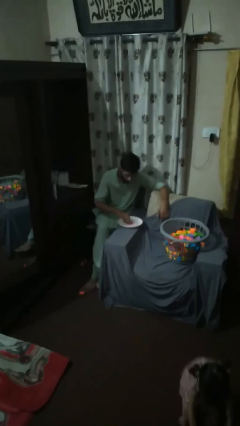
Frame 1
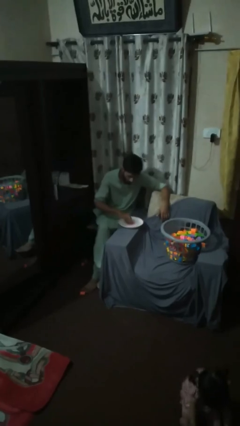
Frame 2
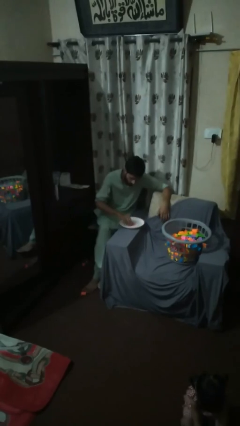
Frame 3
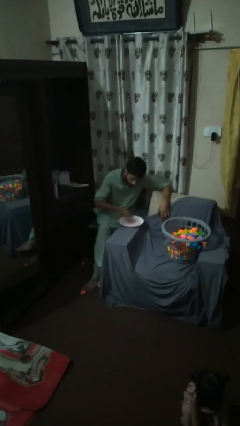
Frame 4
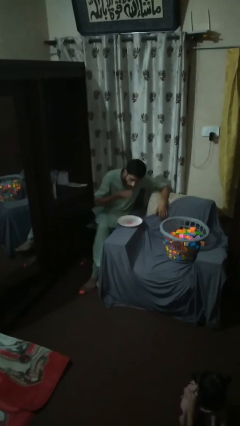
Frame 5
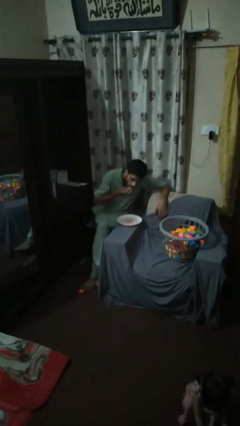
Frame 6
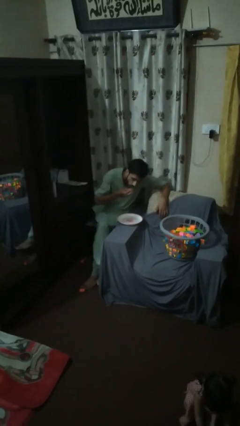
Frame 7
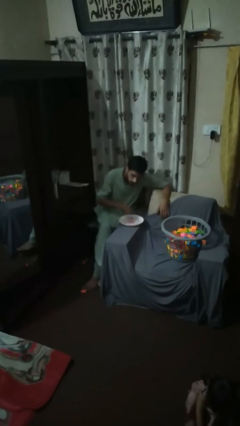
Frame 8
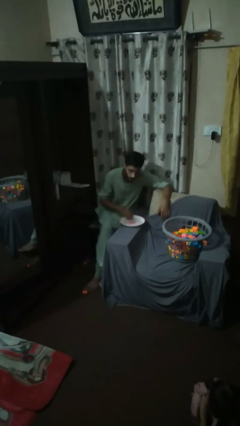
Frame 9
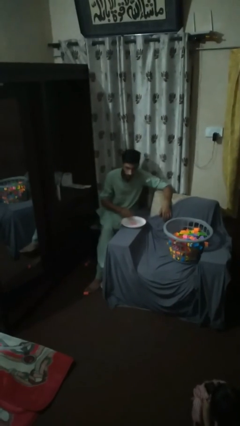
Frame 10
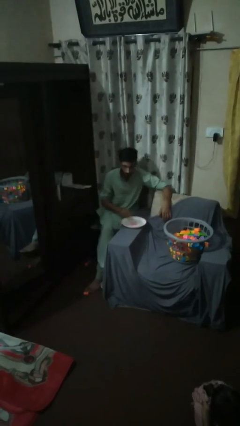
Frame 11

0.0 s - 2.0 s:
person eats with hands

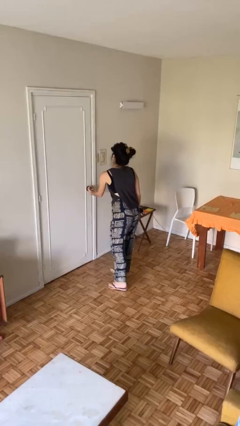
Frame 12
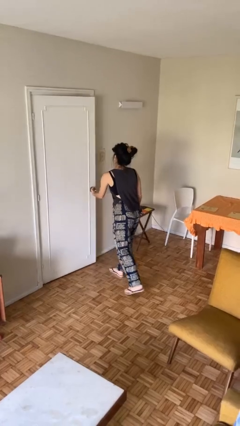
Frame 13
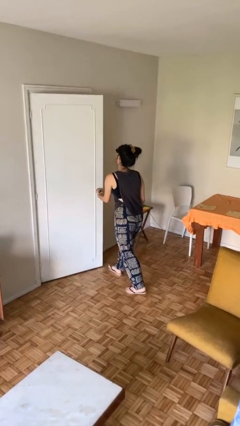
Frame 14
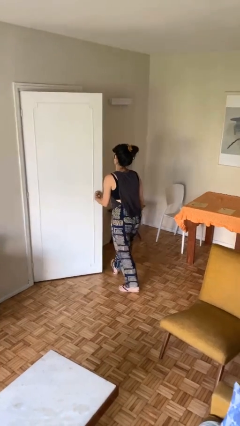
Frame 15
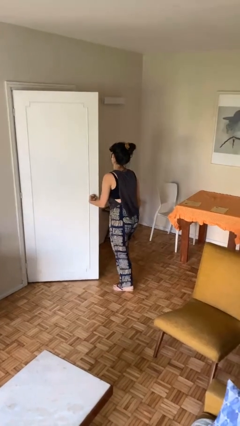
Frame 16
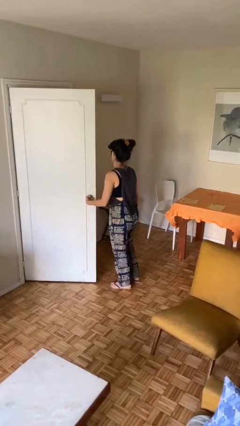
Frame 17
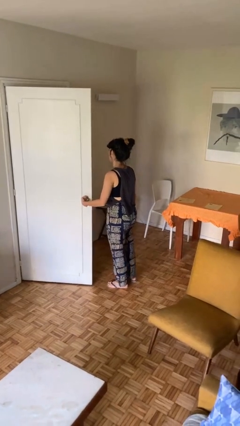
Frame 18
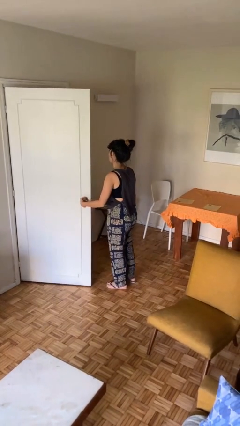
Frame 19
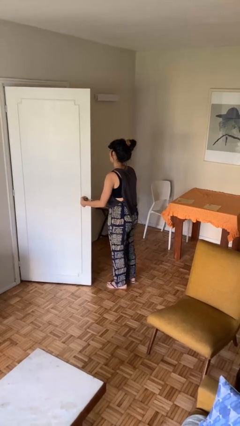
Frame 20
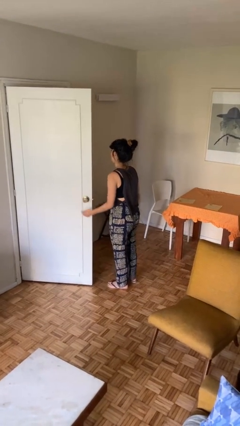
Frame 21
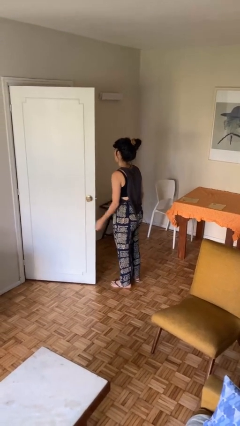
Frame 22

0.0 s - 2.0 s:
person opens facility door

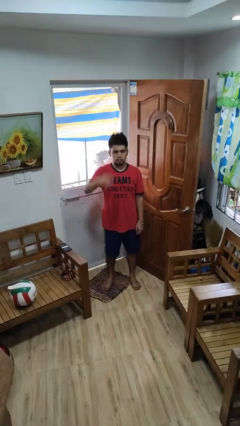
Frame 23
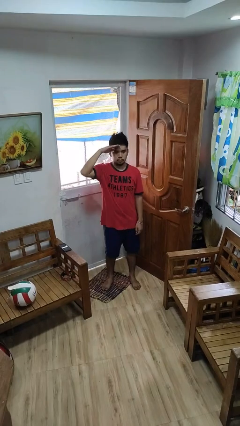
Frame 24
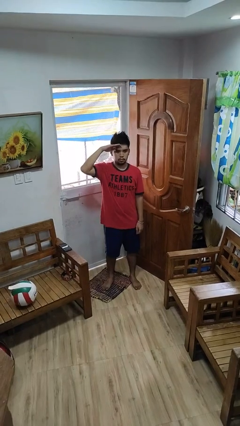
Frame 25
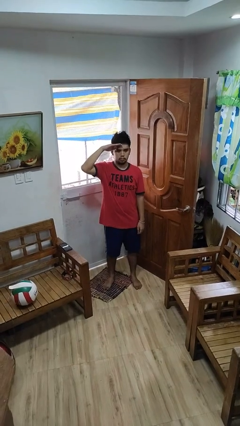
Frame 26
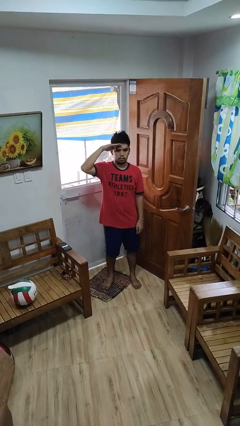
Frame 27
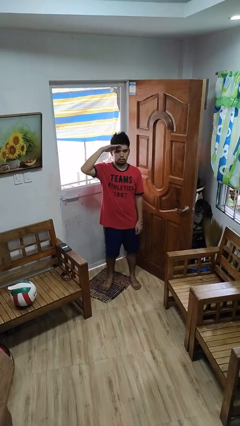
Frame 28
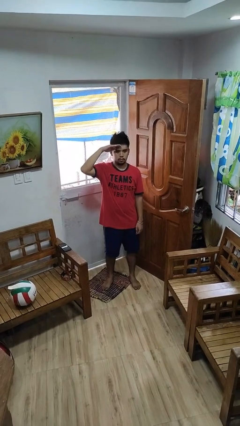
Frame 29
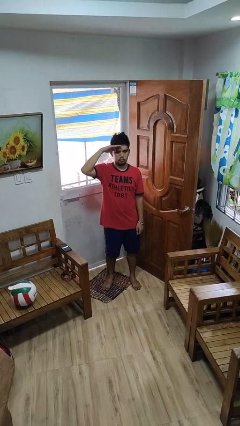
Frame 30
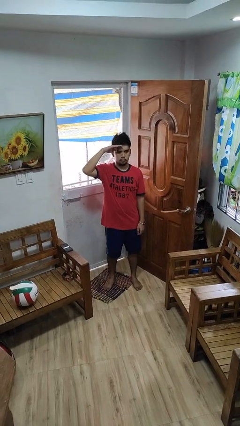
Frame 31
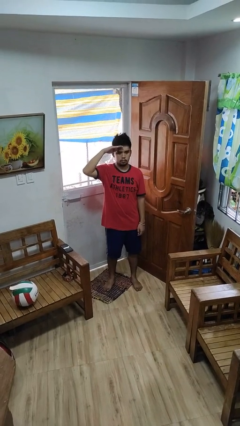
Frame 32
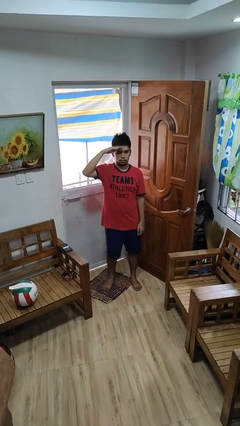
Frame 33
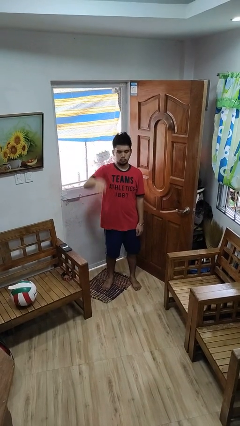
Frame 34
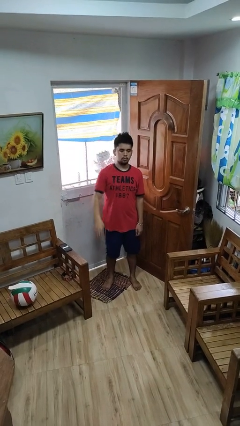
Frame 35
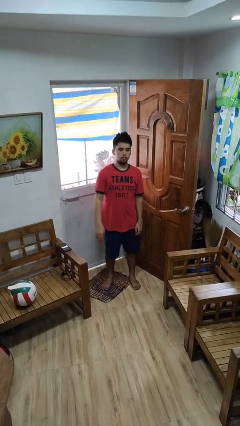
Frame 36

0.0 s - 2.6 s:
person salutes

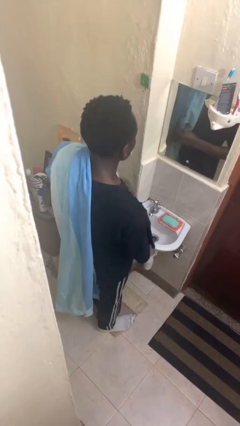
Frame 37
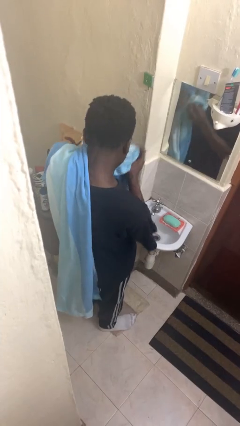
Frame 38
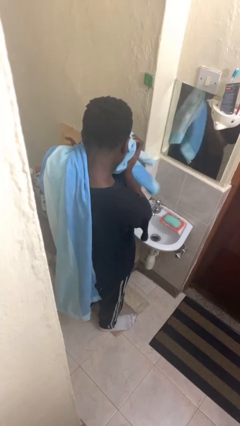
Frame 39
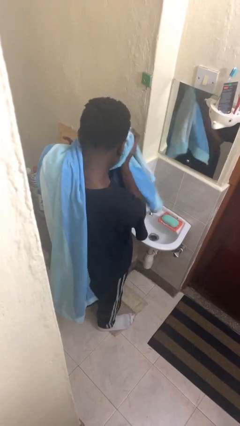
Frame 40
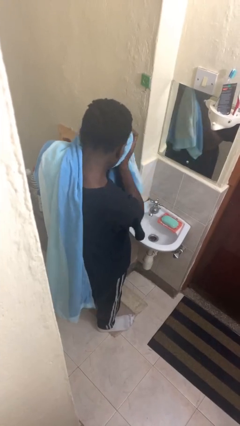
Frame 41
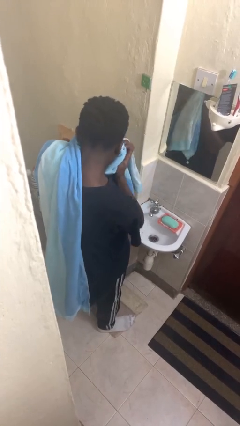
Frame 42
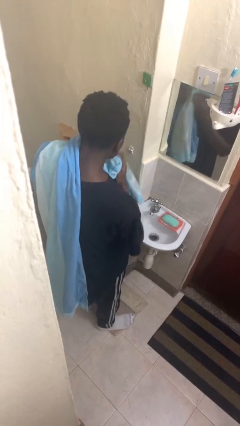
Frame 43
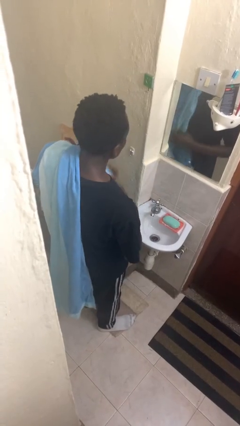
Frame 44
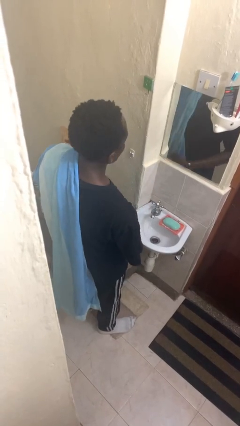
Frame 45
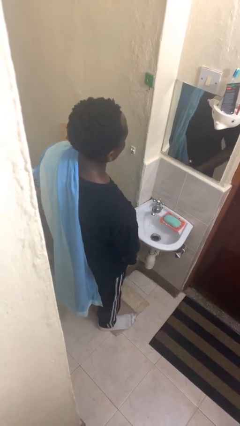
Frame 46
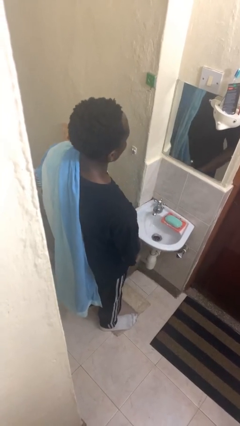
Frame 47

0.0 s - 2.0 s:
person dries face with towel

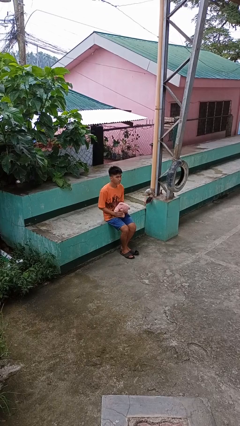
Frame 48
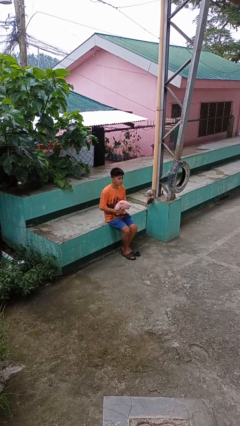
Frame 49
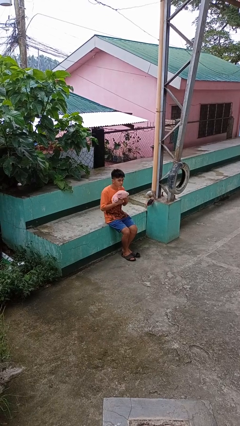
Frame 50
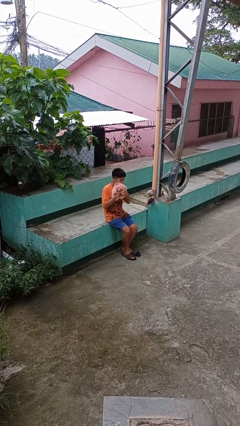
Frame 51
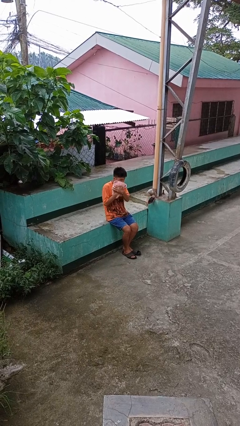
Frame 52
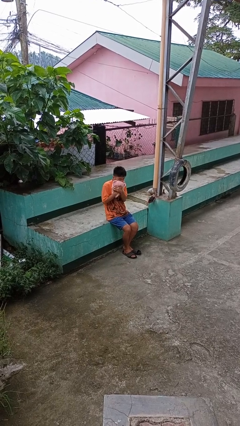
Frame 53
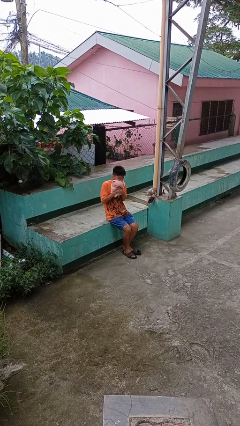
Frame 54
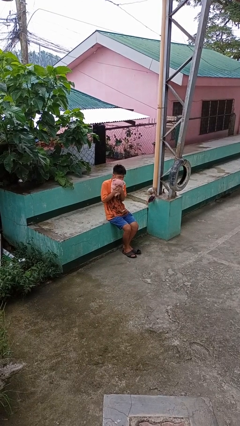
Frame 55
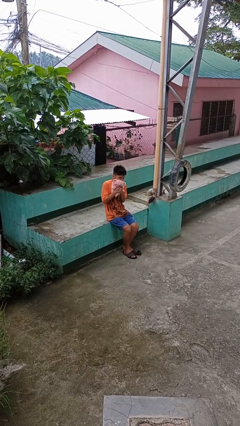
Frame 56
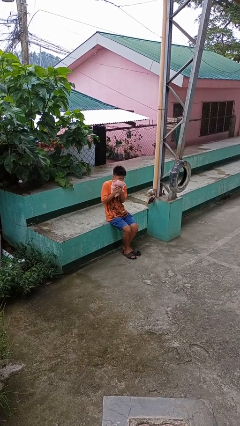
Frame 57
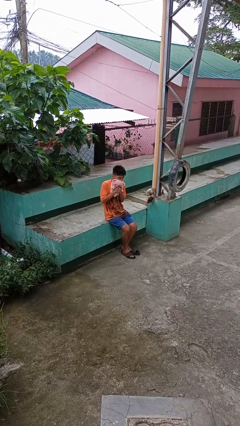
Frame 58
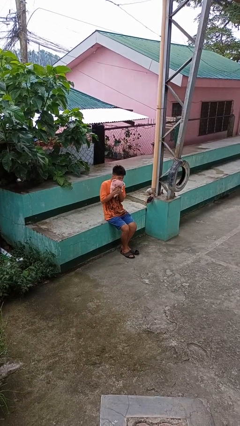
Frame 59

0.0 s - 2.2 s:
person hugs stuffed animal

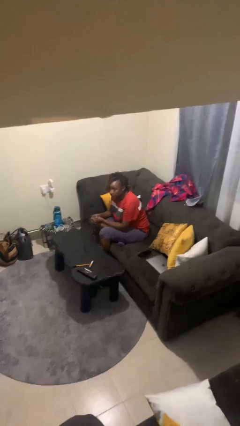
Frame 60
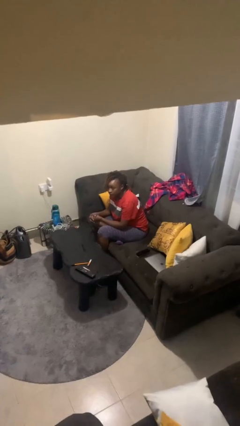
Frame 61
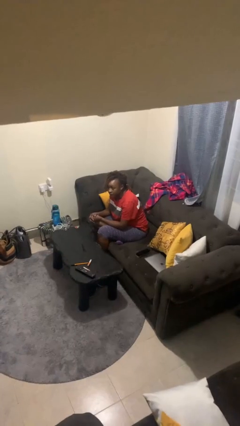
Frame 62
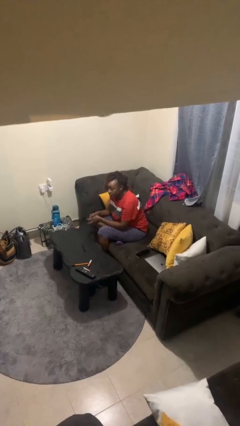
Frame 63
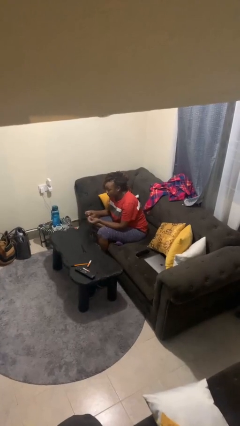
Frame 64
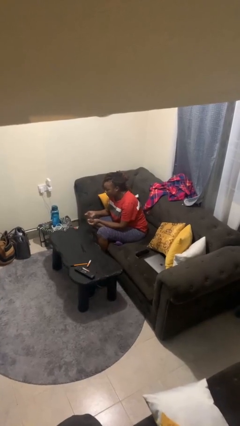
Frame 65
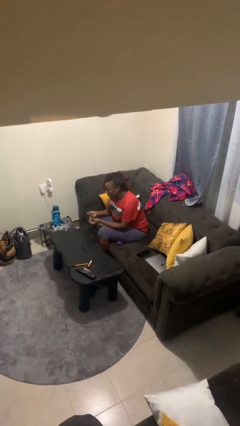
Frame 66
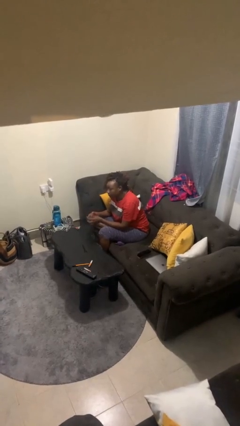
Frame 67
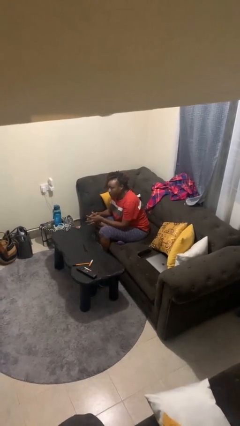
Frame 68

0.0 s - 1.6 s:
person snaps fingers

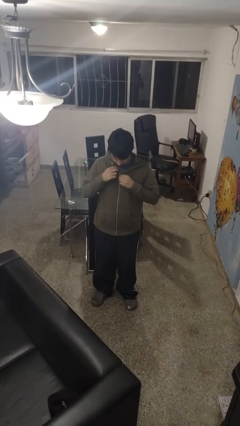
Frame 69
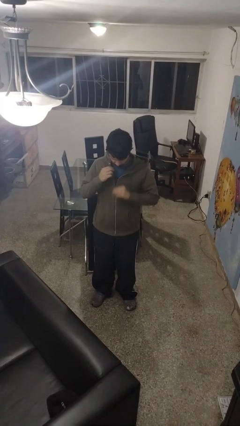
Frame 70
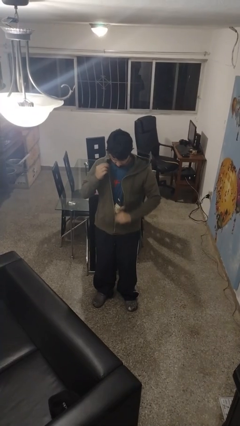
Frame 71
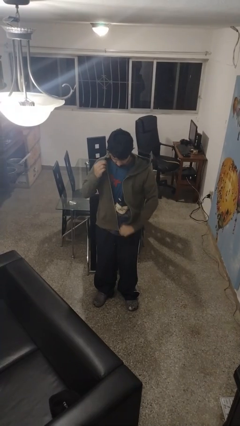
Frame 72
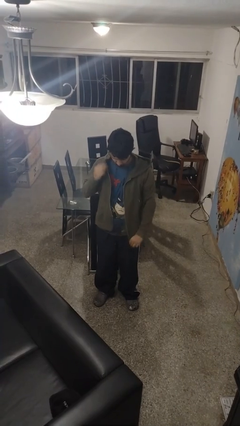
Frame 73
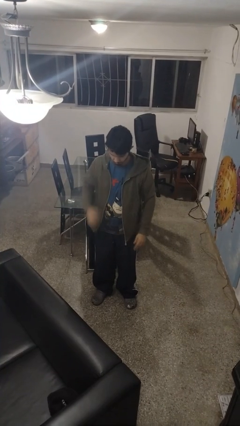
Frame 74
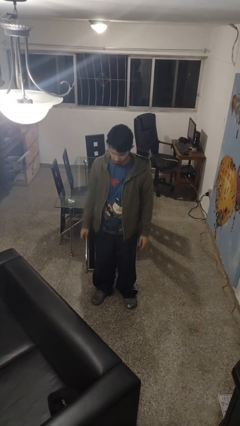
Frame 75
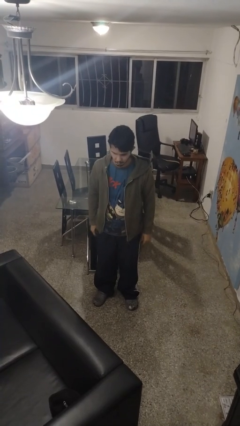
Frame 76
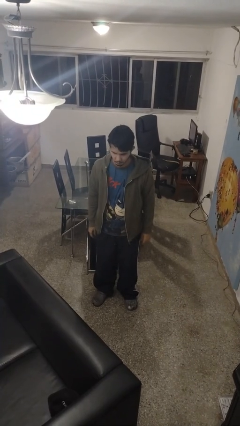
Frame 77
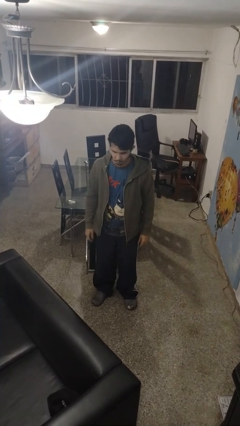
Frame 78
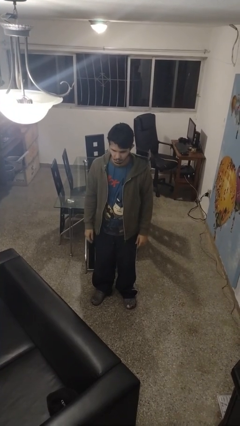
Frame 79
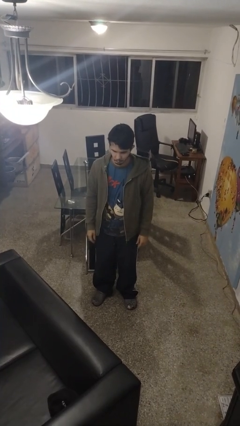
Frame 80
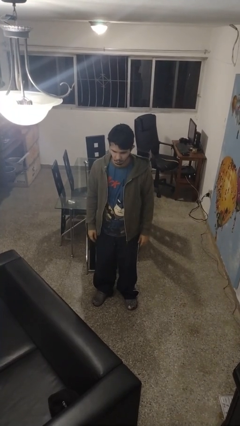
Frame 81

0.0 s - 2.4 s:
person unzips jacket

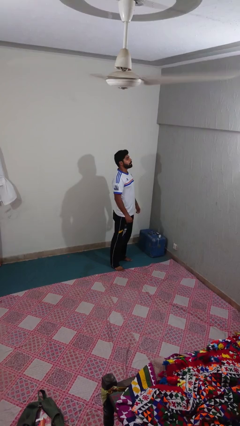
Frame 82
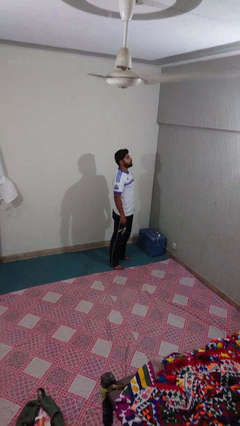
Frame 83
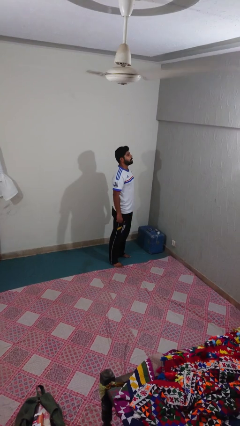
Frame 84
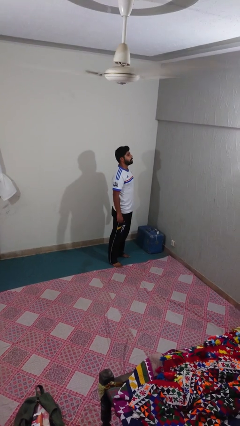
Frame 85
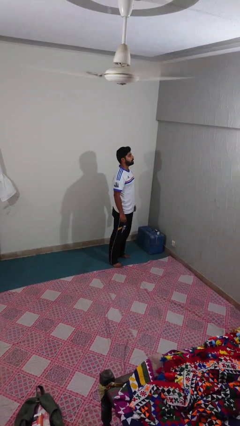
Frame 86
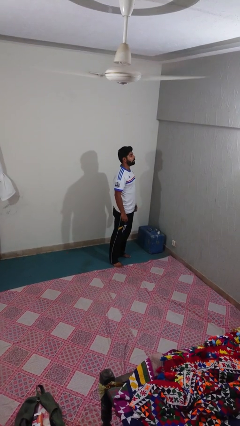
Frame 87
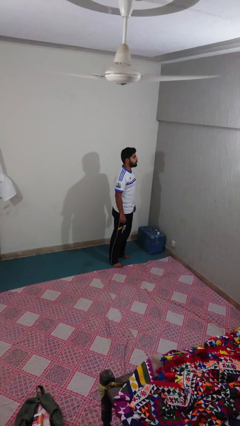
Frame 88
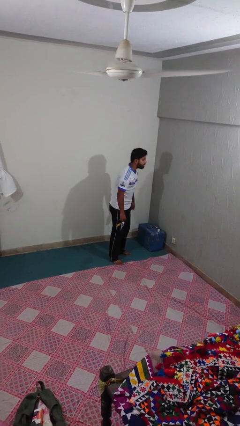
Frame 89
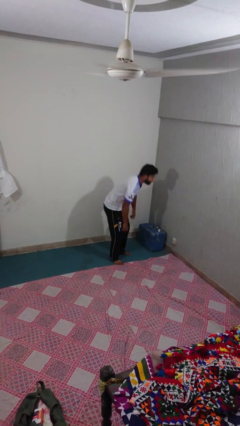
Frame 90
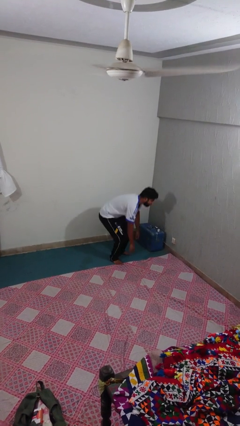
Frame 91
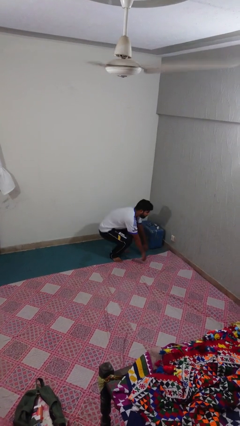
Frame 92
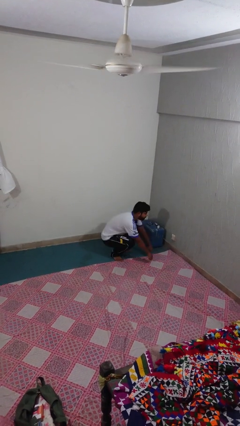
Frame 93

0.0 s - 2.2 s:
person squats
